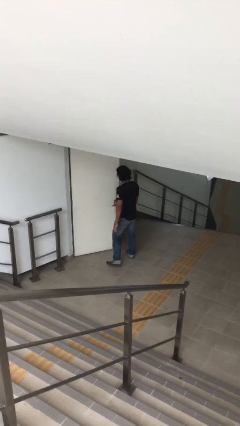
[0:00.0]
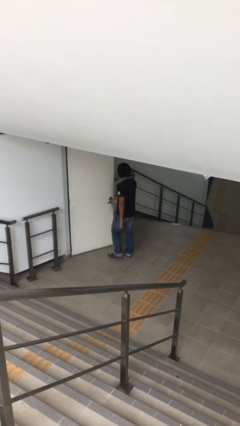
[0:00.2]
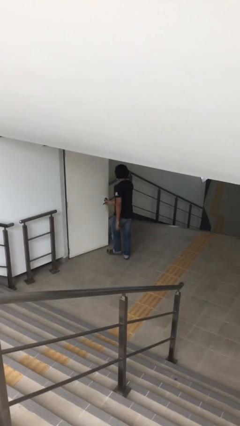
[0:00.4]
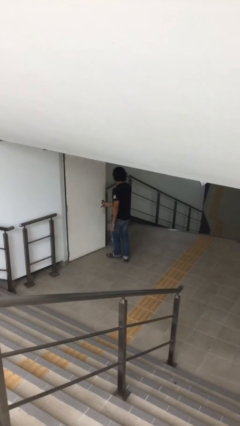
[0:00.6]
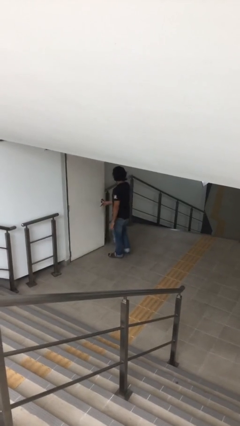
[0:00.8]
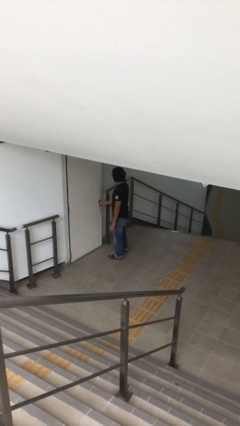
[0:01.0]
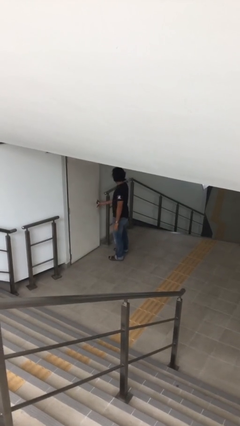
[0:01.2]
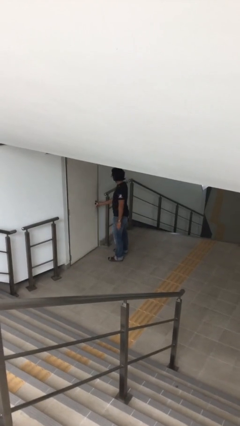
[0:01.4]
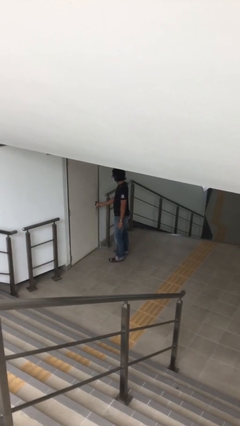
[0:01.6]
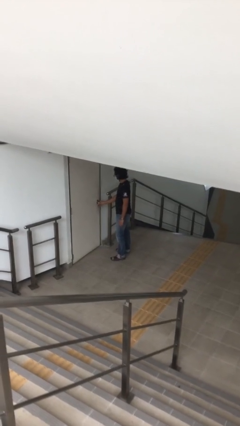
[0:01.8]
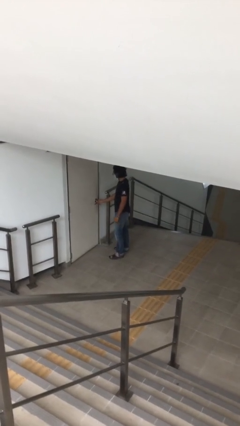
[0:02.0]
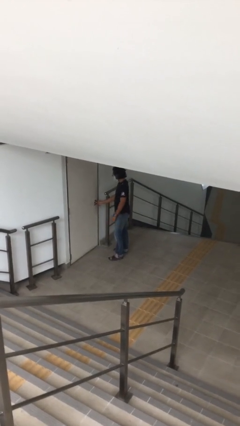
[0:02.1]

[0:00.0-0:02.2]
person closes facility door

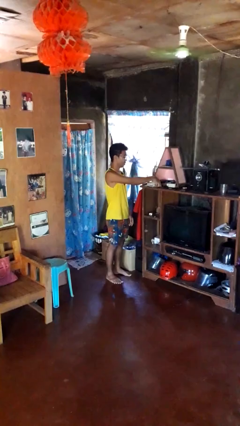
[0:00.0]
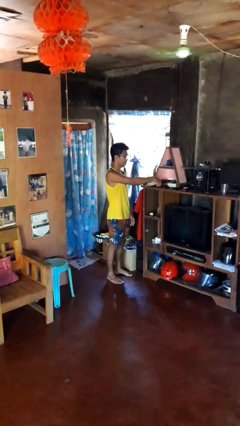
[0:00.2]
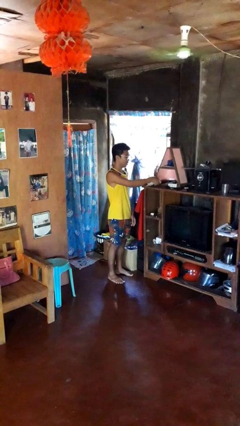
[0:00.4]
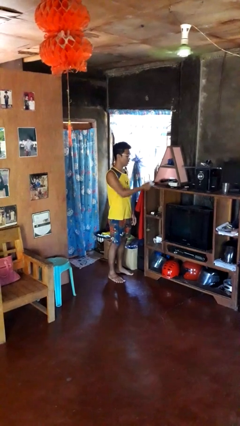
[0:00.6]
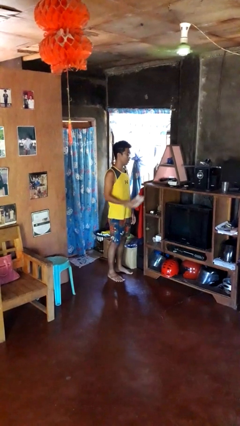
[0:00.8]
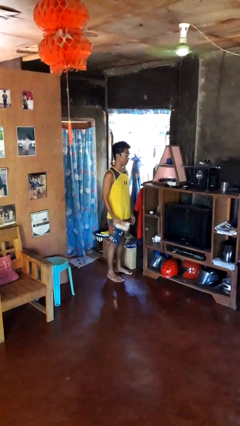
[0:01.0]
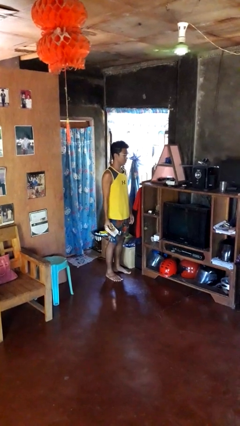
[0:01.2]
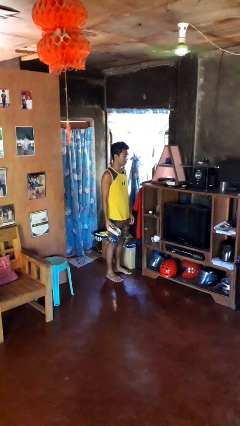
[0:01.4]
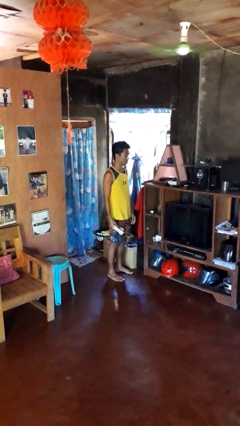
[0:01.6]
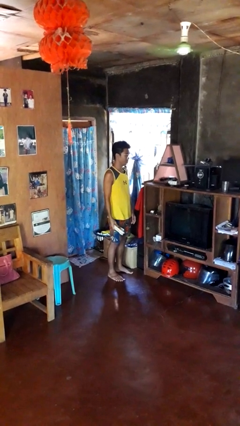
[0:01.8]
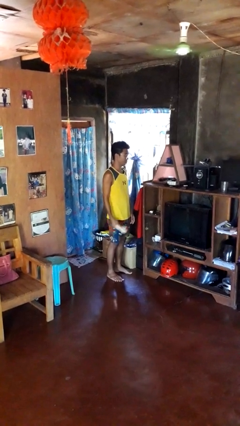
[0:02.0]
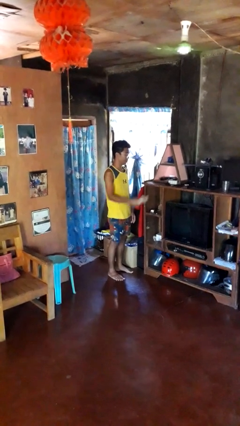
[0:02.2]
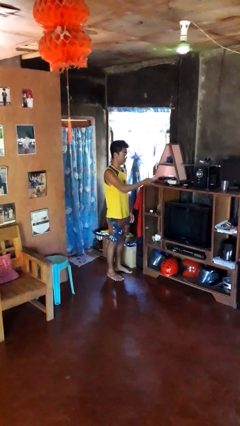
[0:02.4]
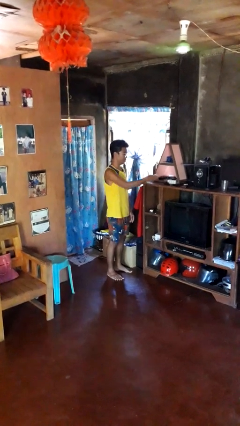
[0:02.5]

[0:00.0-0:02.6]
person picks up object from shelf

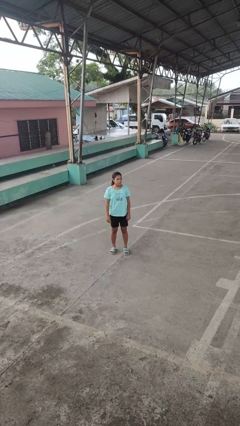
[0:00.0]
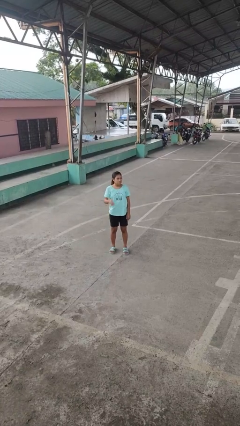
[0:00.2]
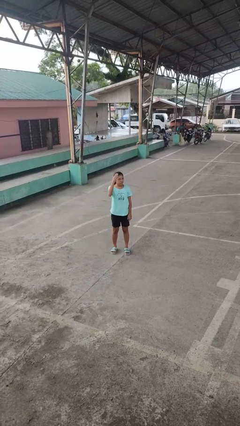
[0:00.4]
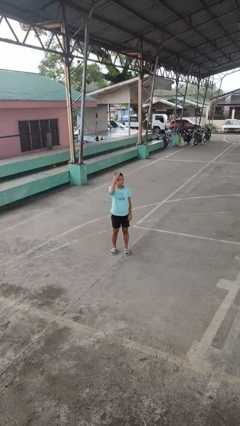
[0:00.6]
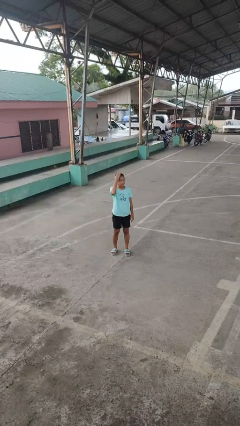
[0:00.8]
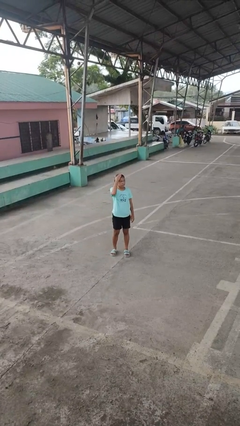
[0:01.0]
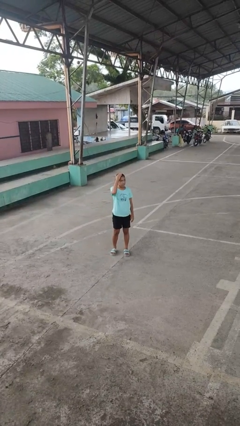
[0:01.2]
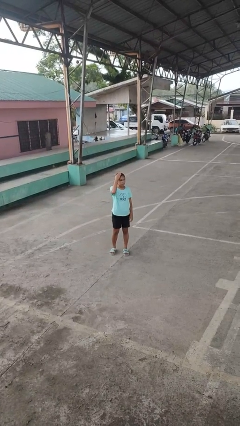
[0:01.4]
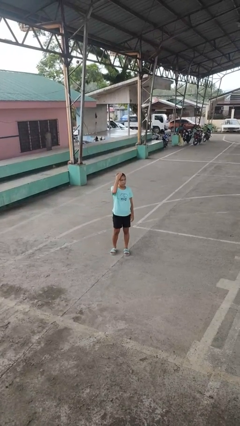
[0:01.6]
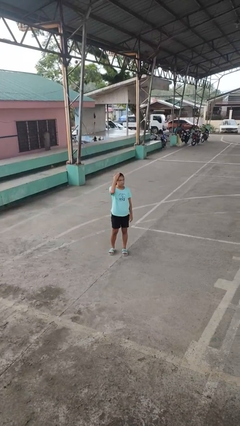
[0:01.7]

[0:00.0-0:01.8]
person pats head

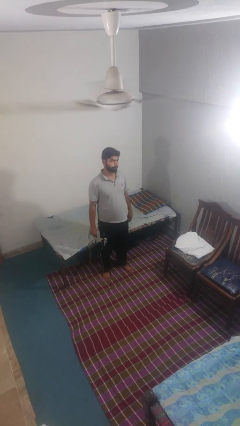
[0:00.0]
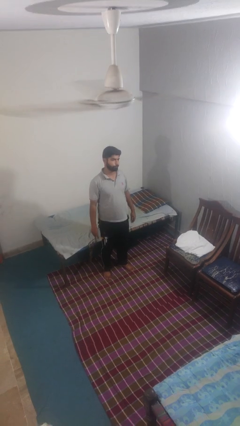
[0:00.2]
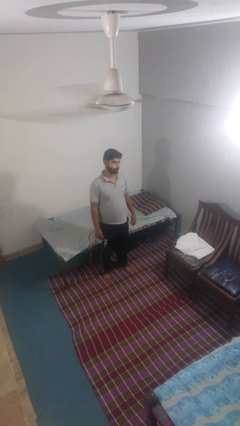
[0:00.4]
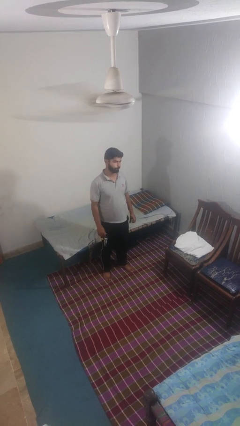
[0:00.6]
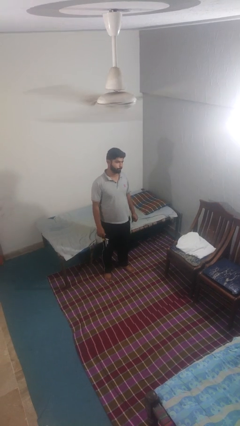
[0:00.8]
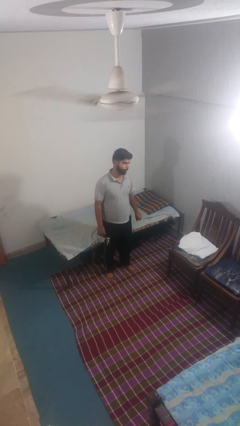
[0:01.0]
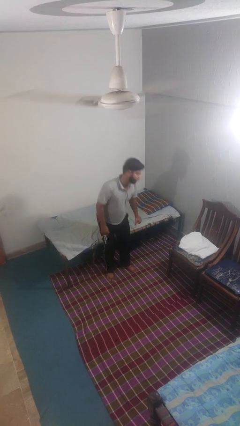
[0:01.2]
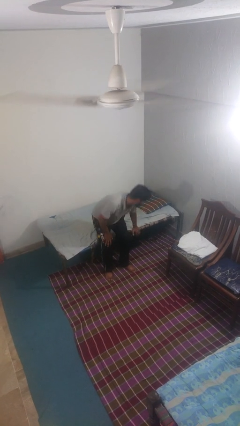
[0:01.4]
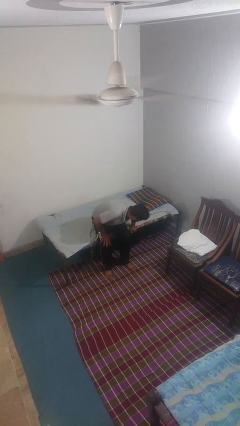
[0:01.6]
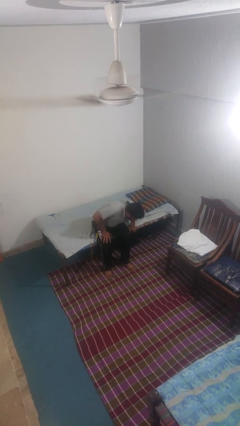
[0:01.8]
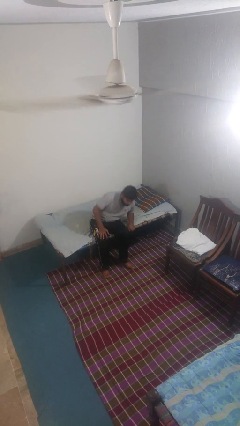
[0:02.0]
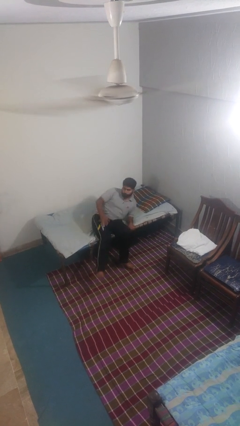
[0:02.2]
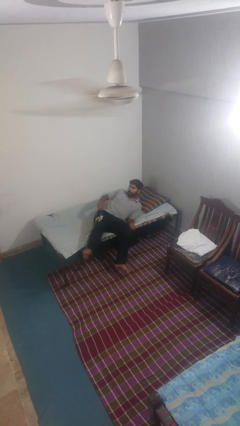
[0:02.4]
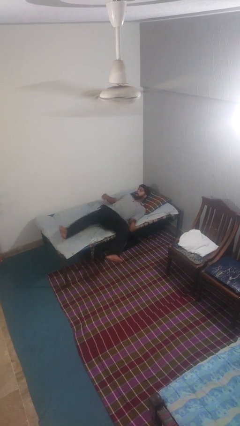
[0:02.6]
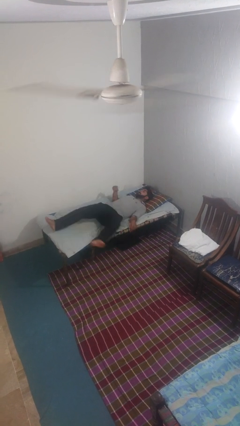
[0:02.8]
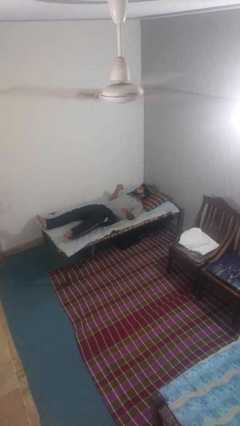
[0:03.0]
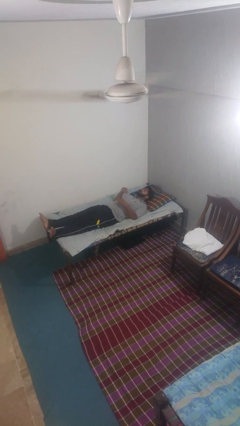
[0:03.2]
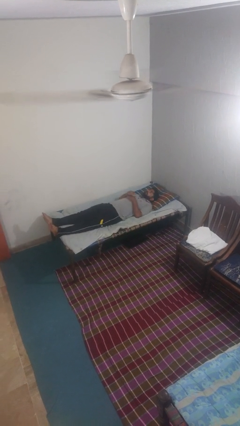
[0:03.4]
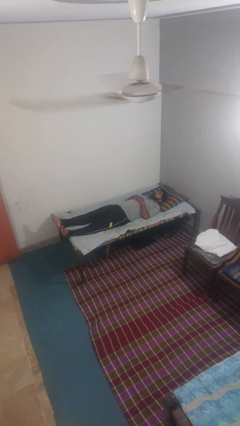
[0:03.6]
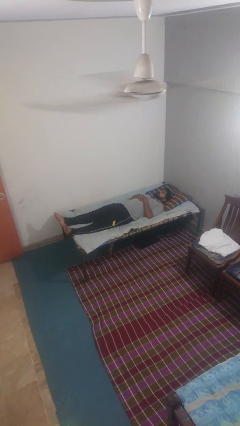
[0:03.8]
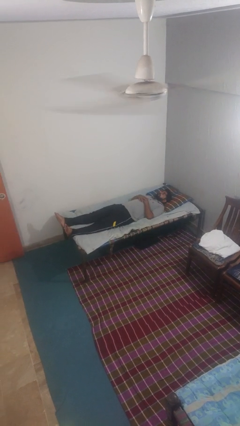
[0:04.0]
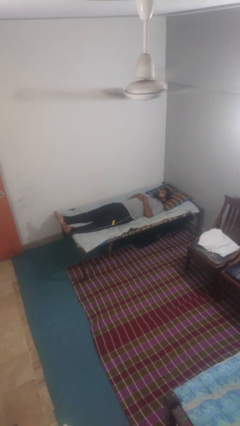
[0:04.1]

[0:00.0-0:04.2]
person lies down on bed

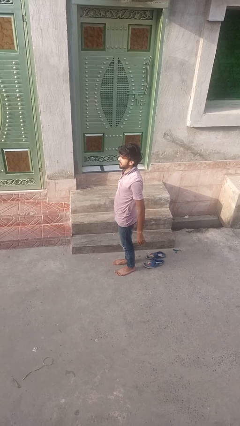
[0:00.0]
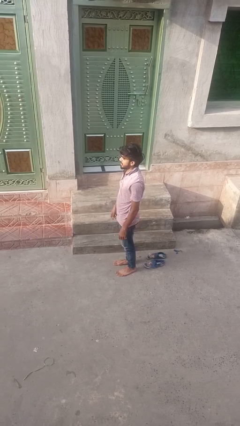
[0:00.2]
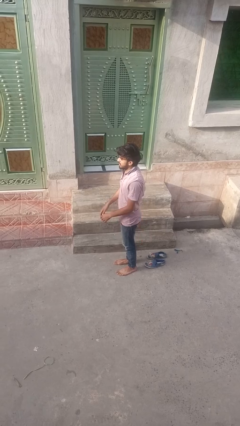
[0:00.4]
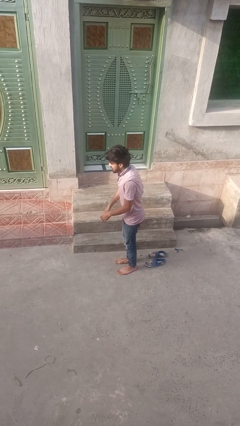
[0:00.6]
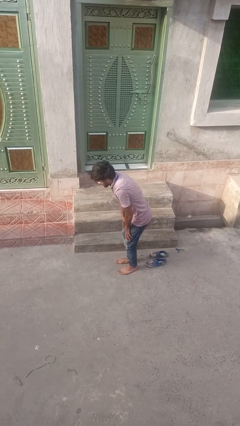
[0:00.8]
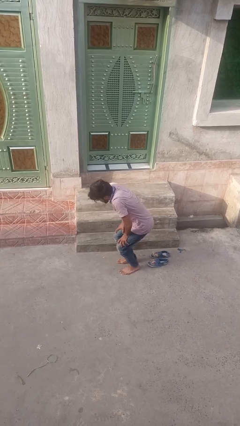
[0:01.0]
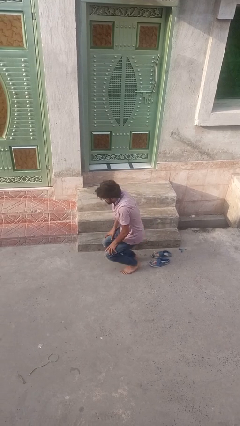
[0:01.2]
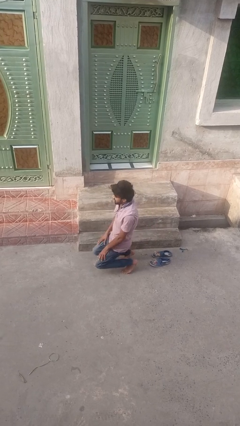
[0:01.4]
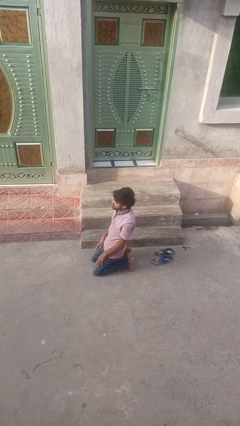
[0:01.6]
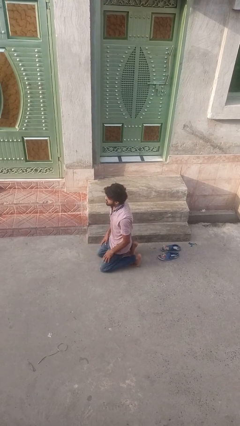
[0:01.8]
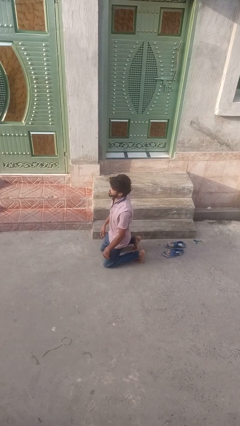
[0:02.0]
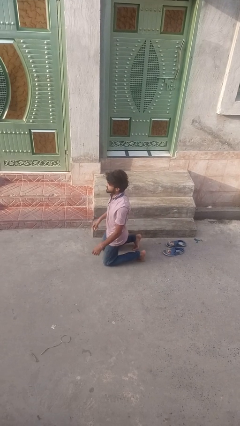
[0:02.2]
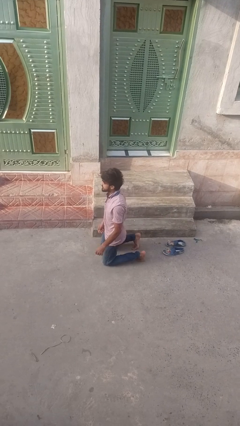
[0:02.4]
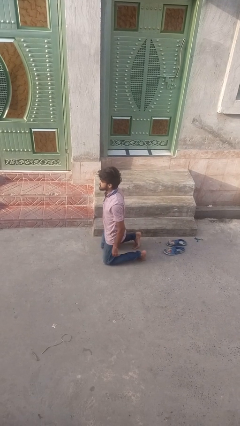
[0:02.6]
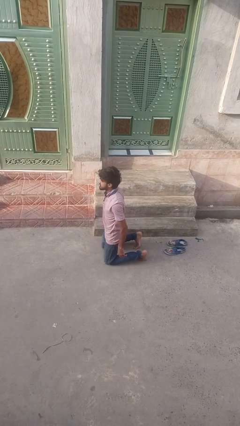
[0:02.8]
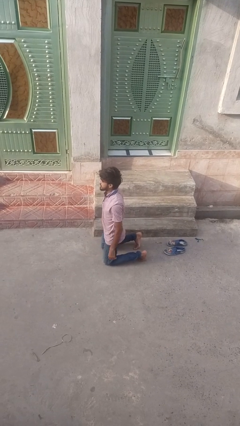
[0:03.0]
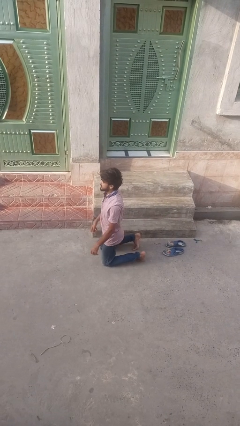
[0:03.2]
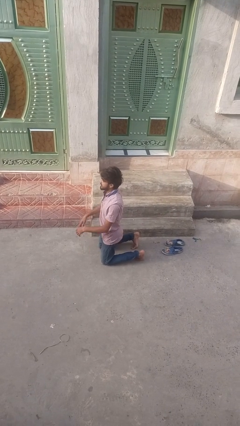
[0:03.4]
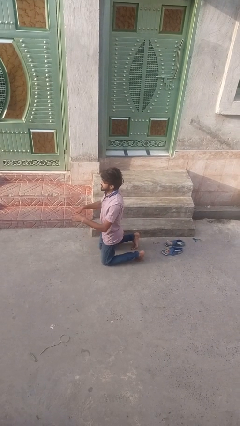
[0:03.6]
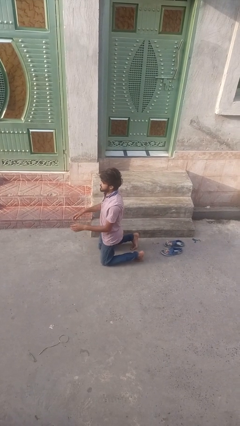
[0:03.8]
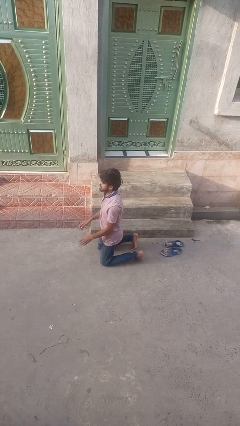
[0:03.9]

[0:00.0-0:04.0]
person kneels

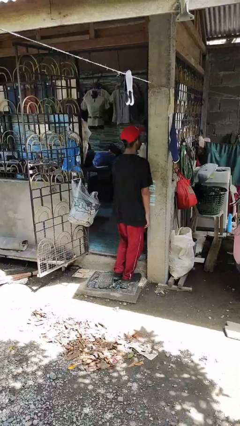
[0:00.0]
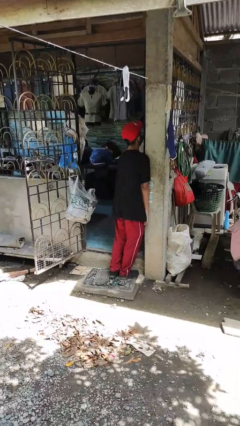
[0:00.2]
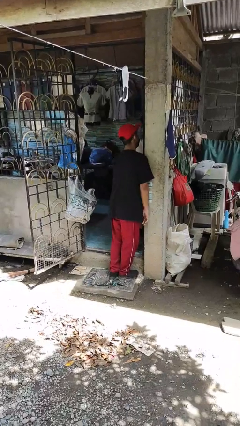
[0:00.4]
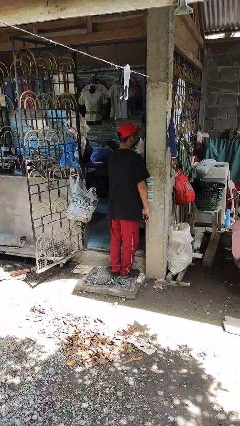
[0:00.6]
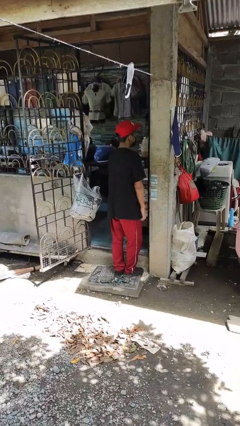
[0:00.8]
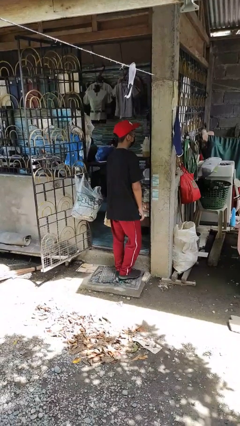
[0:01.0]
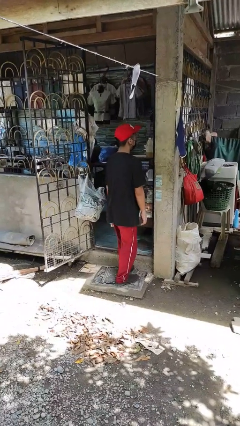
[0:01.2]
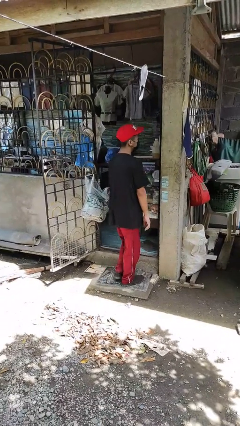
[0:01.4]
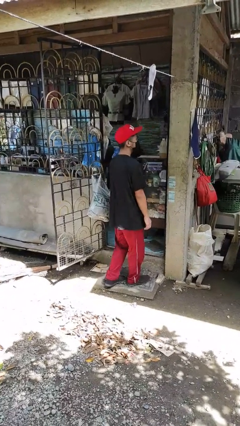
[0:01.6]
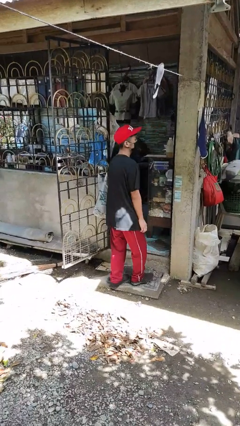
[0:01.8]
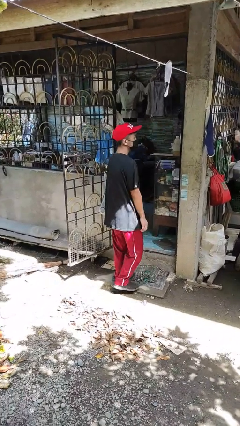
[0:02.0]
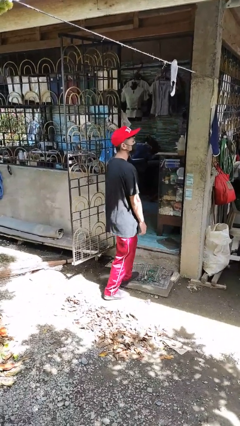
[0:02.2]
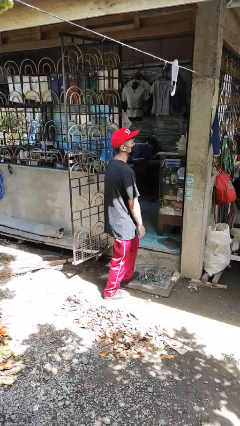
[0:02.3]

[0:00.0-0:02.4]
person bumps into wall
